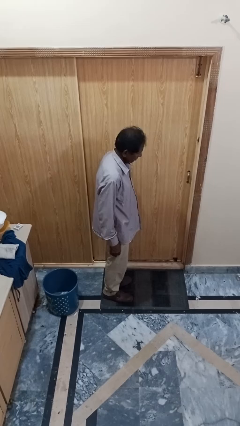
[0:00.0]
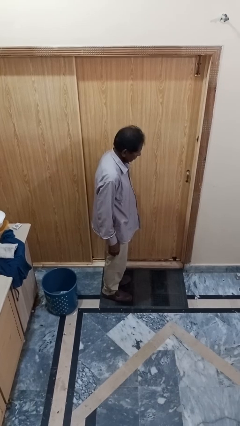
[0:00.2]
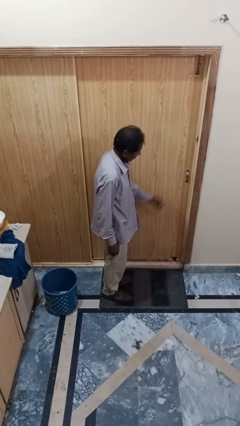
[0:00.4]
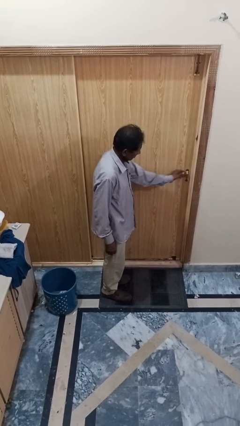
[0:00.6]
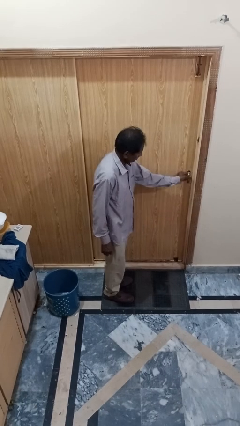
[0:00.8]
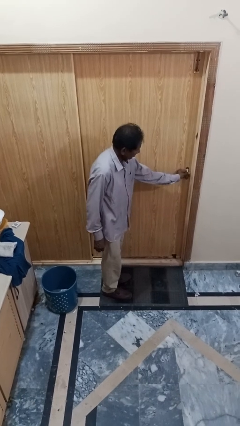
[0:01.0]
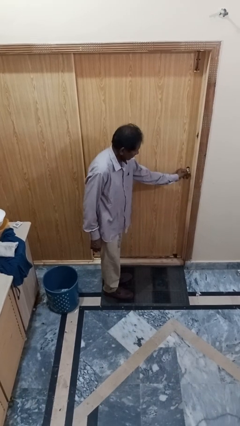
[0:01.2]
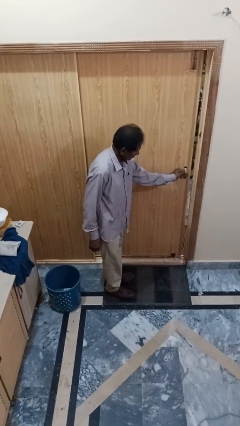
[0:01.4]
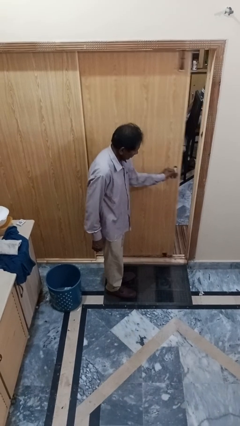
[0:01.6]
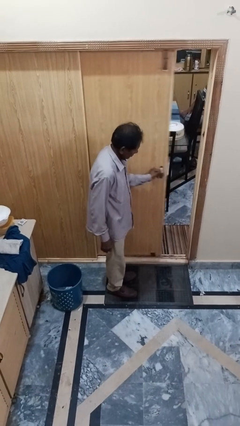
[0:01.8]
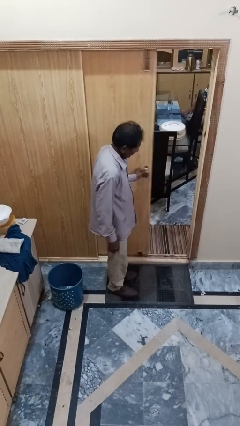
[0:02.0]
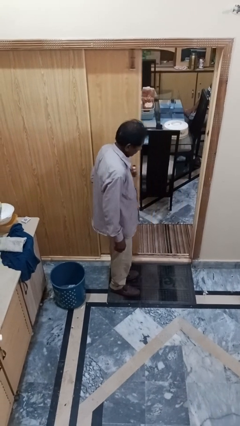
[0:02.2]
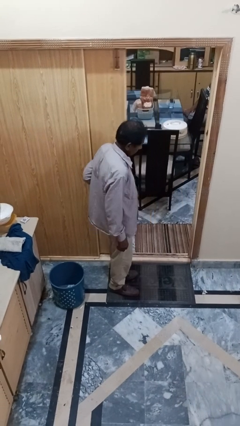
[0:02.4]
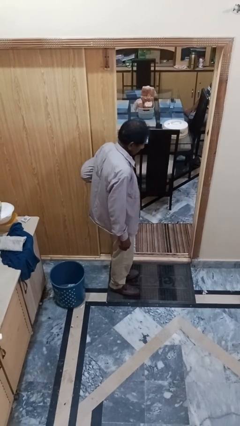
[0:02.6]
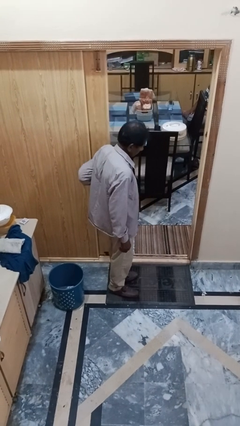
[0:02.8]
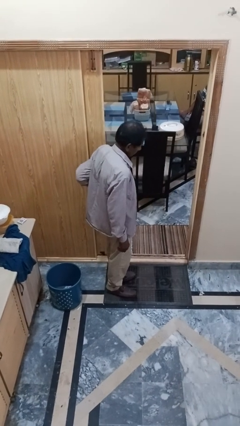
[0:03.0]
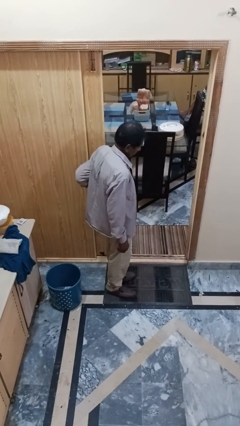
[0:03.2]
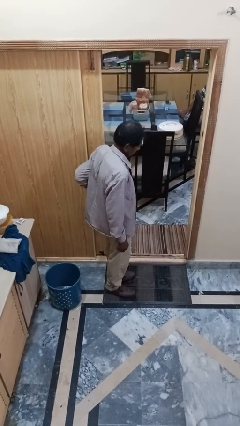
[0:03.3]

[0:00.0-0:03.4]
person opens sliding door

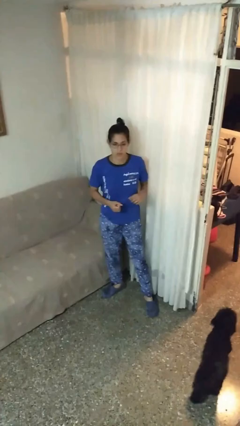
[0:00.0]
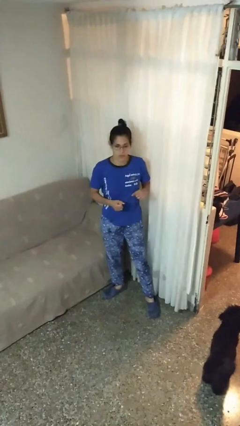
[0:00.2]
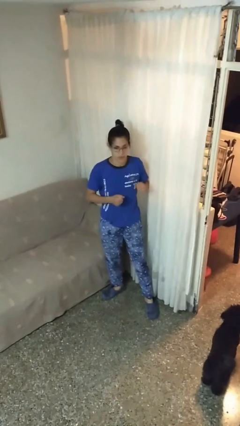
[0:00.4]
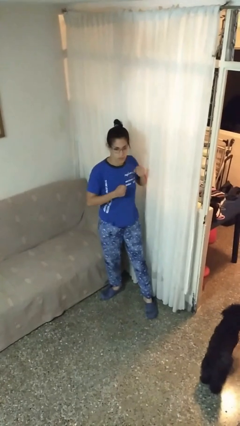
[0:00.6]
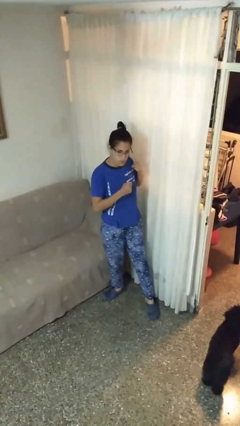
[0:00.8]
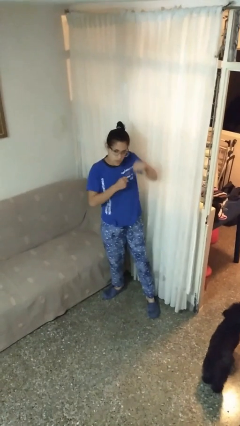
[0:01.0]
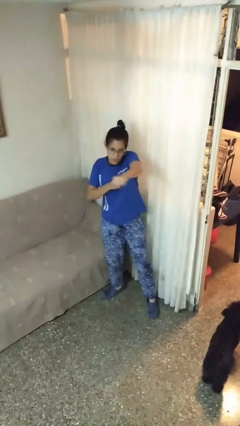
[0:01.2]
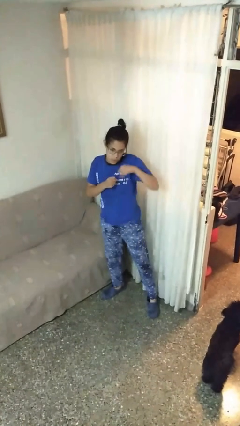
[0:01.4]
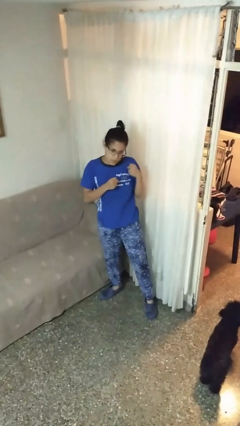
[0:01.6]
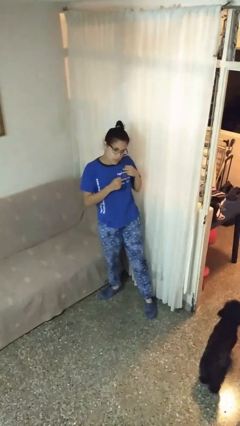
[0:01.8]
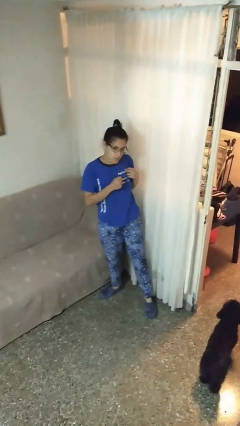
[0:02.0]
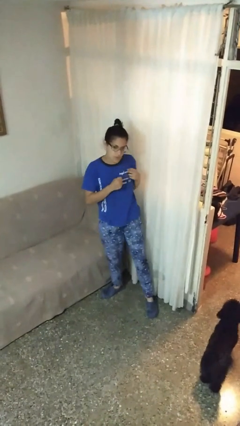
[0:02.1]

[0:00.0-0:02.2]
person punches

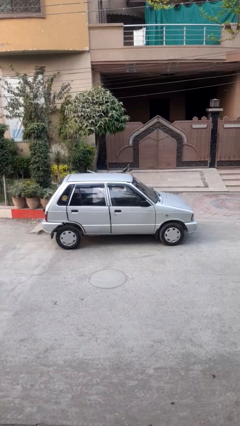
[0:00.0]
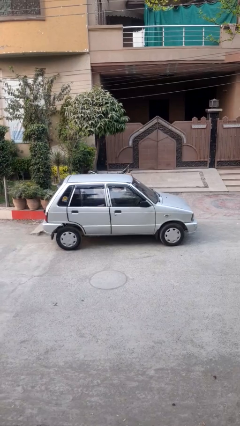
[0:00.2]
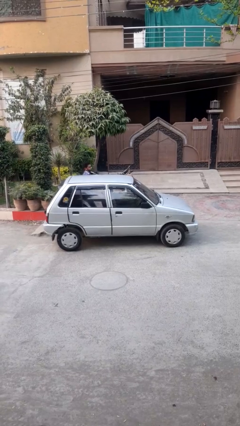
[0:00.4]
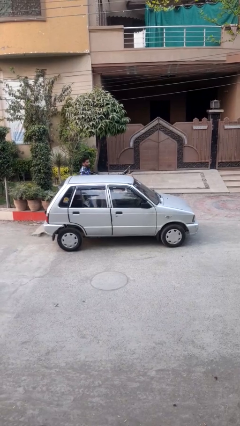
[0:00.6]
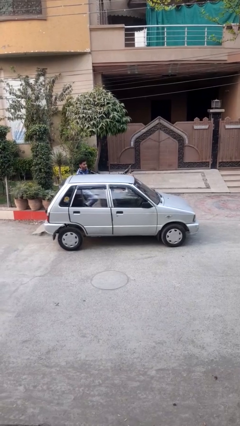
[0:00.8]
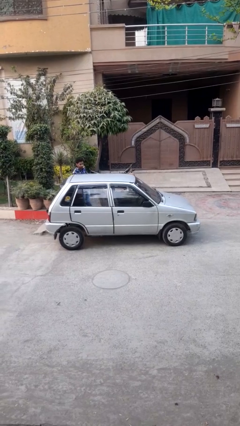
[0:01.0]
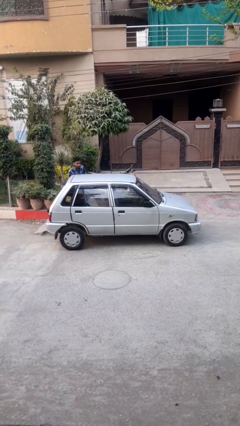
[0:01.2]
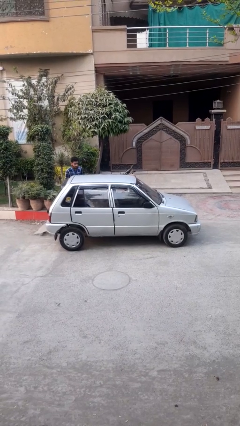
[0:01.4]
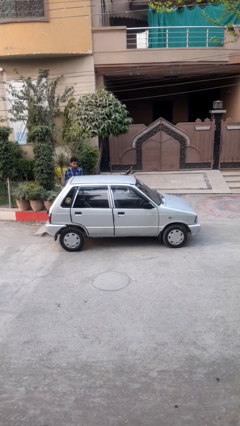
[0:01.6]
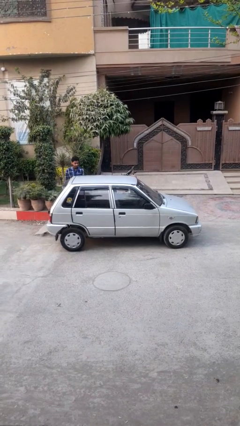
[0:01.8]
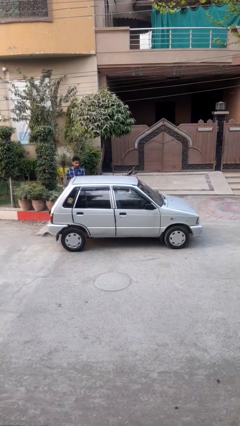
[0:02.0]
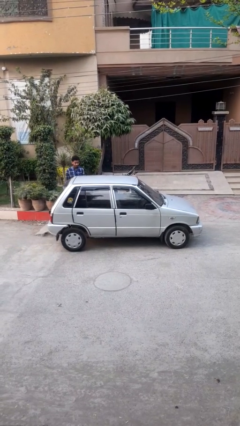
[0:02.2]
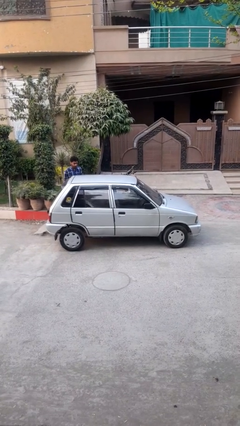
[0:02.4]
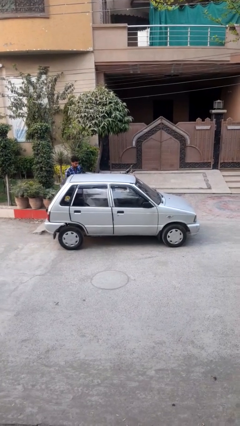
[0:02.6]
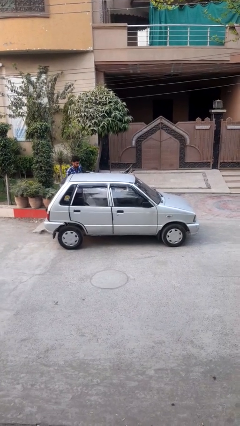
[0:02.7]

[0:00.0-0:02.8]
car drops off person

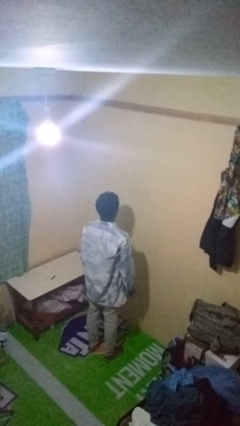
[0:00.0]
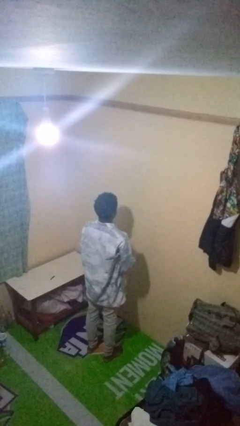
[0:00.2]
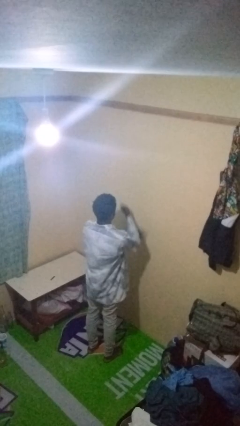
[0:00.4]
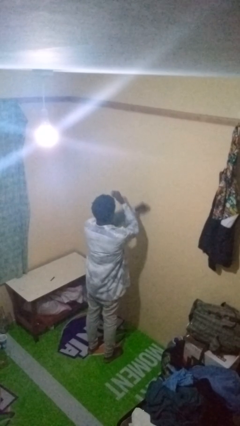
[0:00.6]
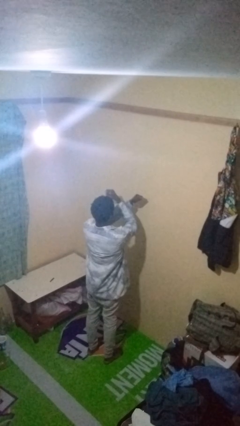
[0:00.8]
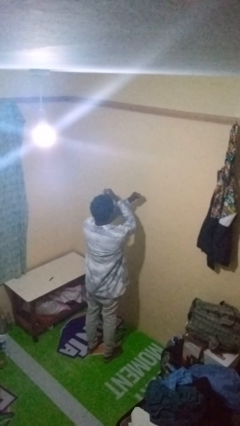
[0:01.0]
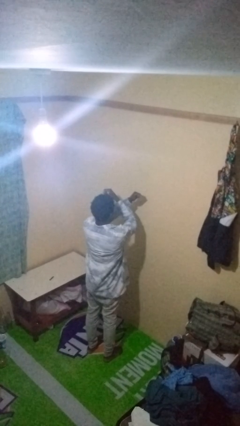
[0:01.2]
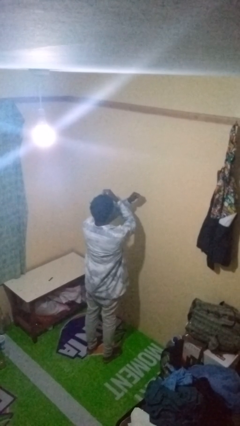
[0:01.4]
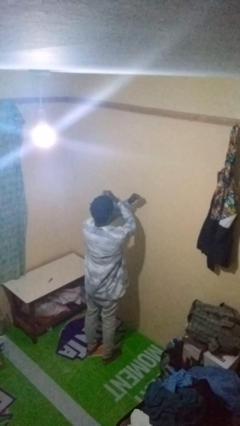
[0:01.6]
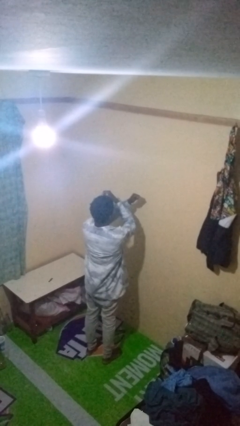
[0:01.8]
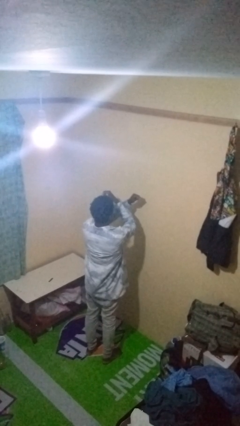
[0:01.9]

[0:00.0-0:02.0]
person gestures arms x

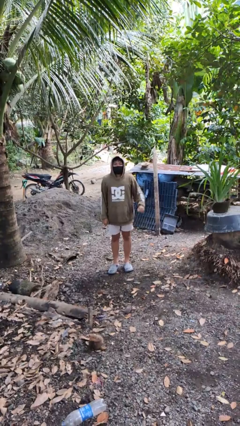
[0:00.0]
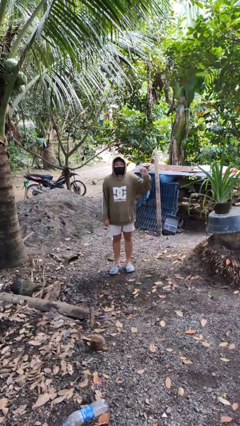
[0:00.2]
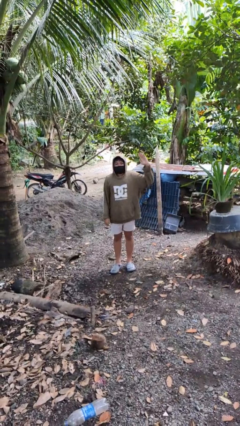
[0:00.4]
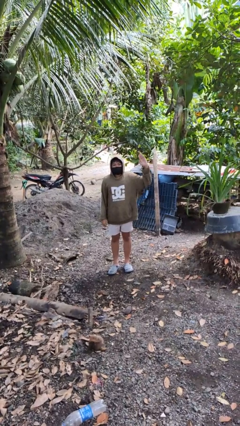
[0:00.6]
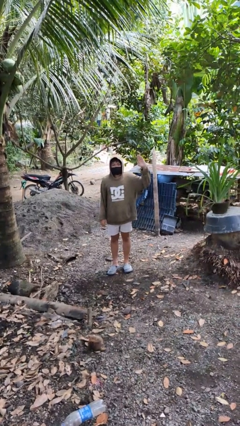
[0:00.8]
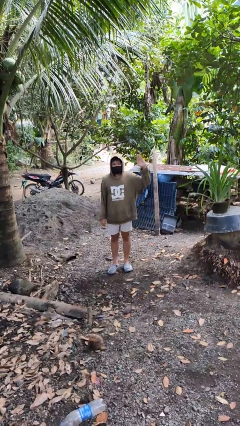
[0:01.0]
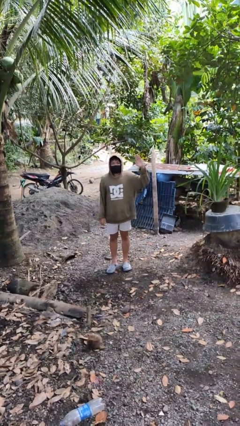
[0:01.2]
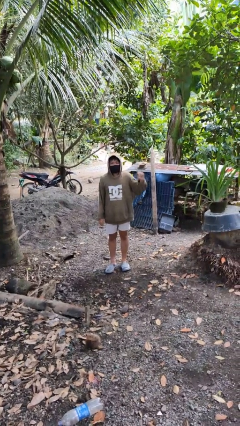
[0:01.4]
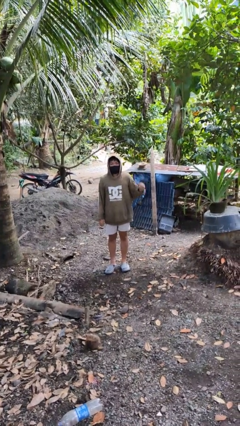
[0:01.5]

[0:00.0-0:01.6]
person gestures number five

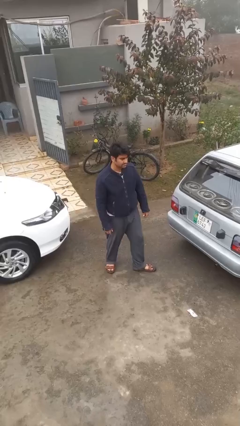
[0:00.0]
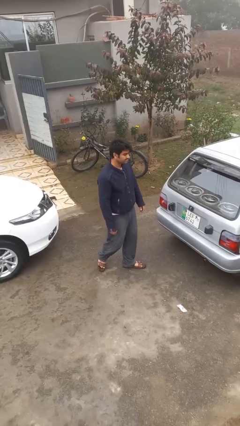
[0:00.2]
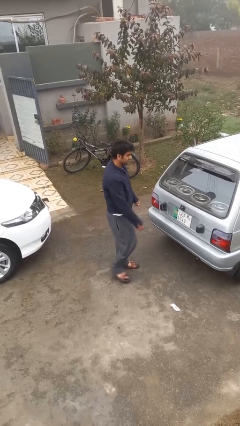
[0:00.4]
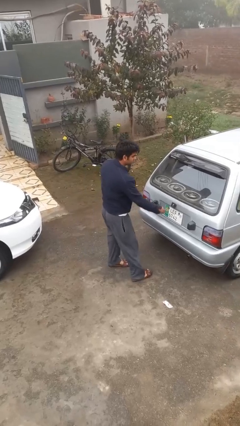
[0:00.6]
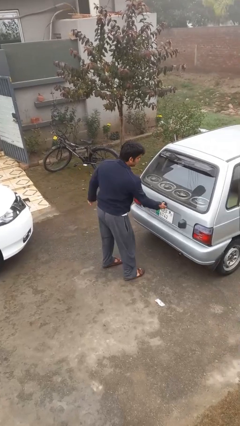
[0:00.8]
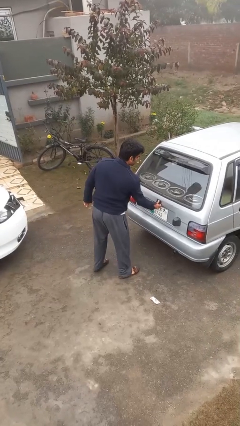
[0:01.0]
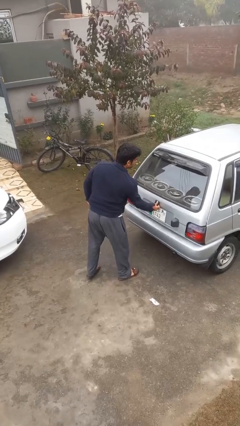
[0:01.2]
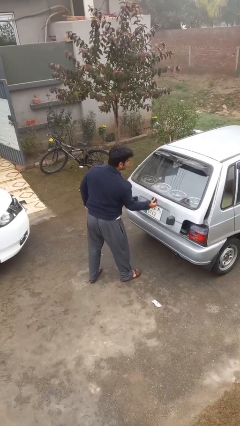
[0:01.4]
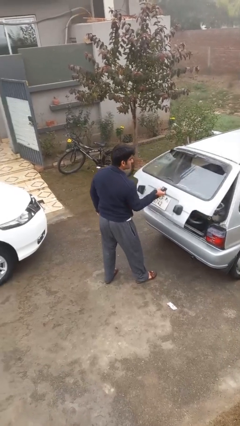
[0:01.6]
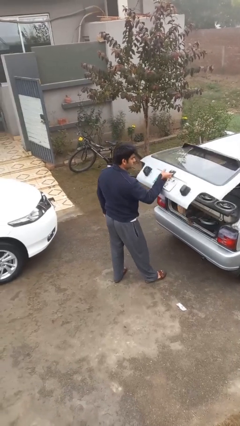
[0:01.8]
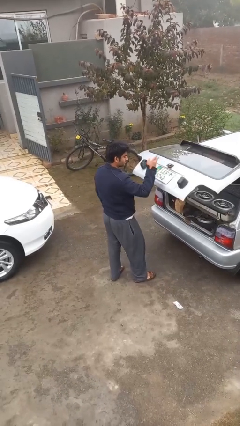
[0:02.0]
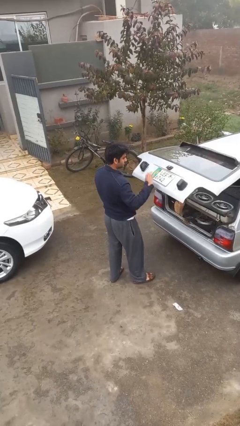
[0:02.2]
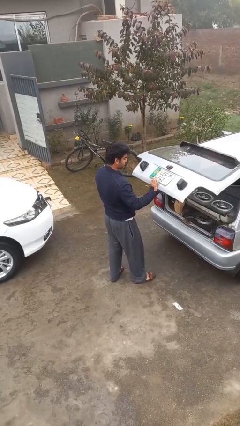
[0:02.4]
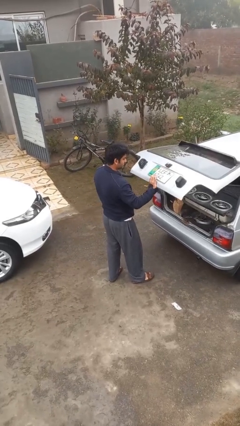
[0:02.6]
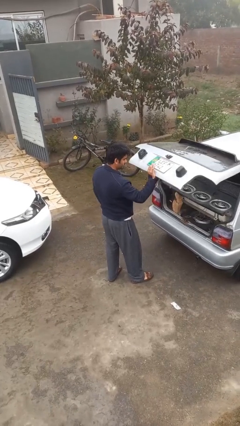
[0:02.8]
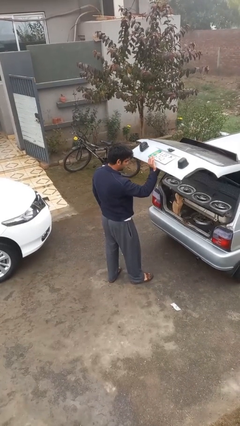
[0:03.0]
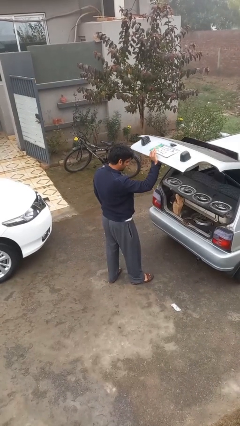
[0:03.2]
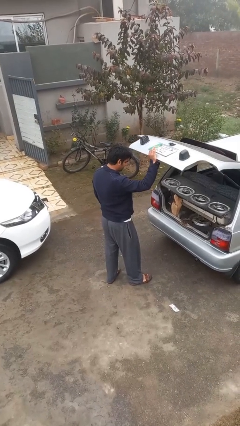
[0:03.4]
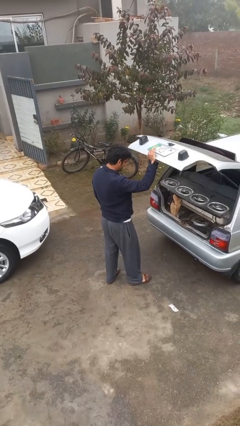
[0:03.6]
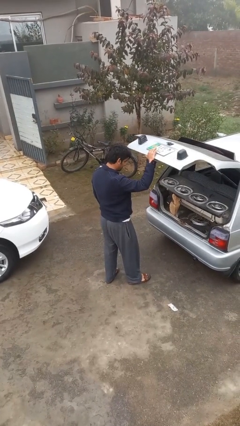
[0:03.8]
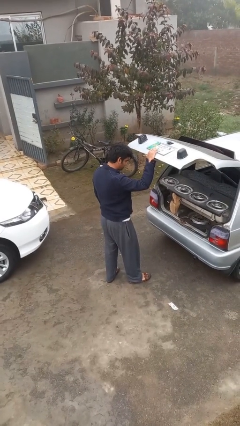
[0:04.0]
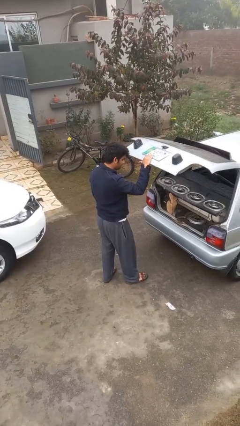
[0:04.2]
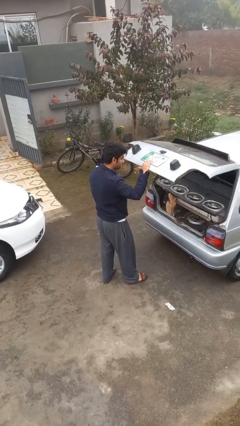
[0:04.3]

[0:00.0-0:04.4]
person opens car trunk

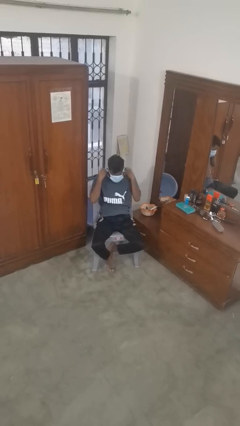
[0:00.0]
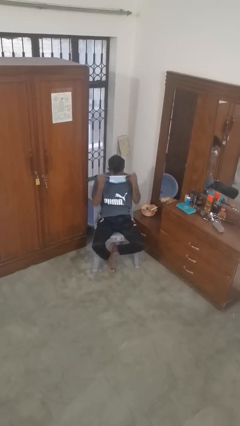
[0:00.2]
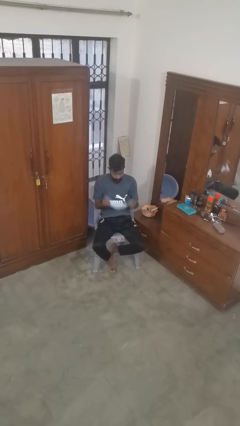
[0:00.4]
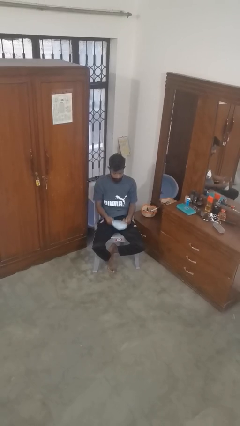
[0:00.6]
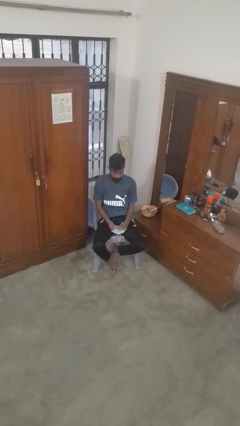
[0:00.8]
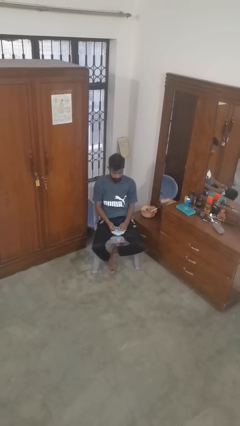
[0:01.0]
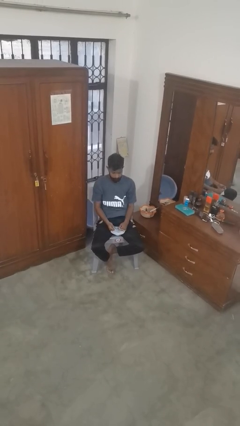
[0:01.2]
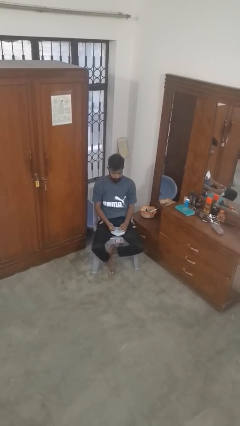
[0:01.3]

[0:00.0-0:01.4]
person takes off facemask
